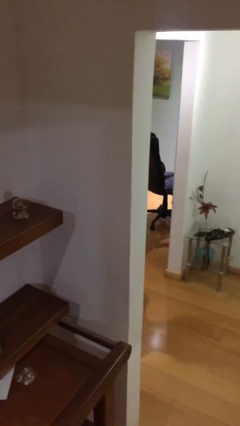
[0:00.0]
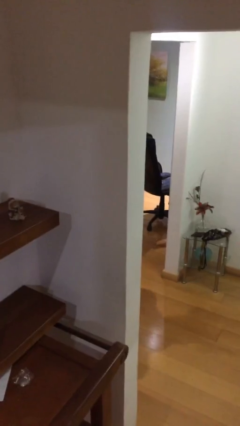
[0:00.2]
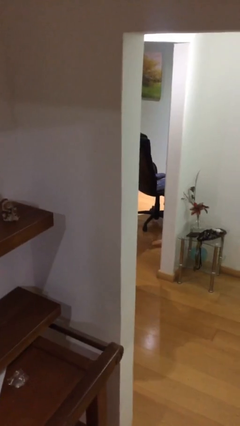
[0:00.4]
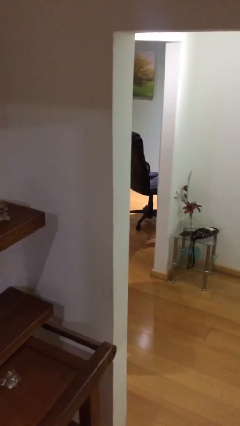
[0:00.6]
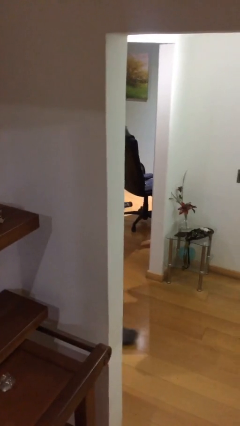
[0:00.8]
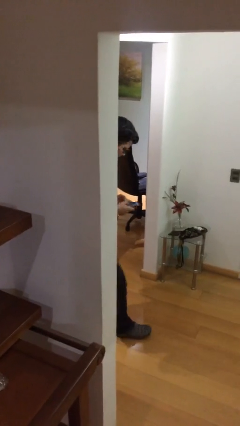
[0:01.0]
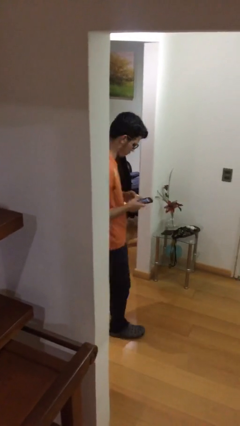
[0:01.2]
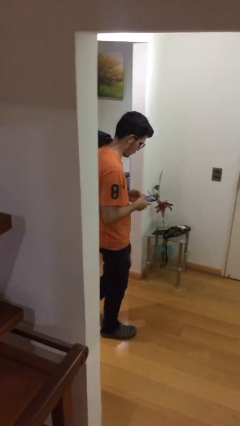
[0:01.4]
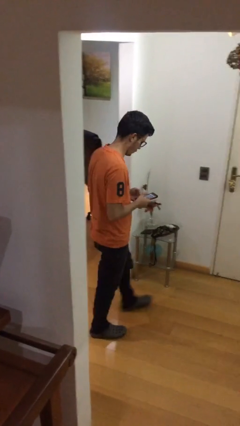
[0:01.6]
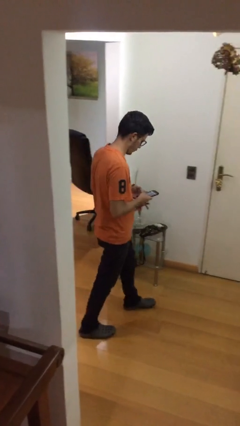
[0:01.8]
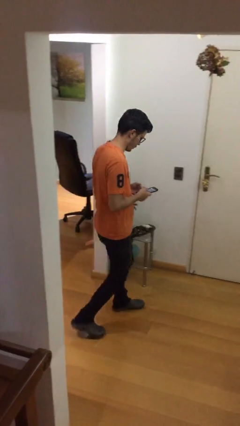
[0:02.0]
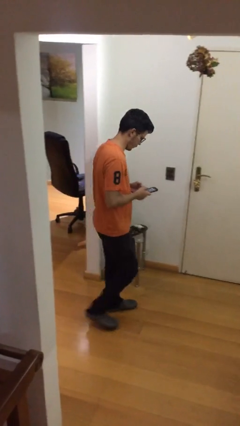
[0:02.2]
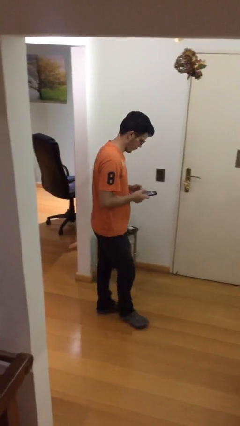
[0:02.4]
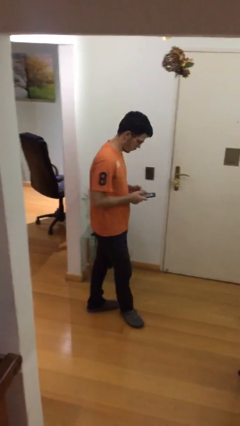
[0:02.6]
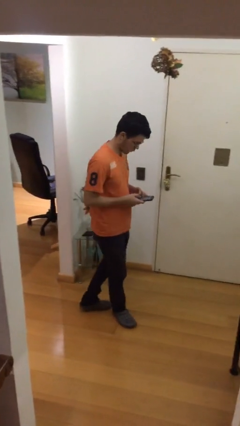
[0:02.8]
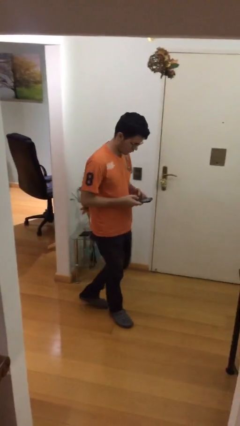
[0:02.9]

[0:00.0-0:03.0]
person enters scene through structure

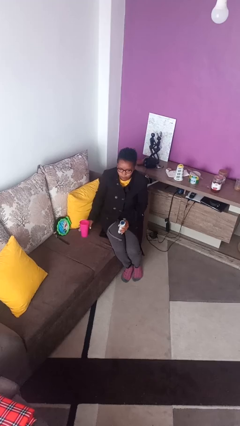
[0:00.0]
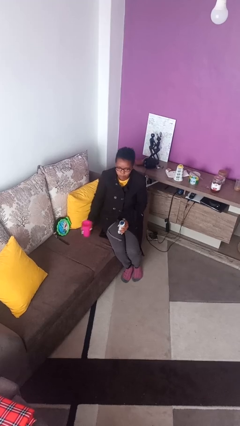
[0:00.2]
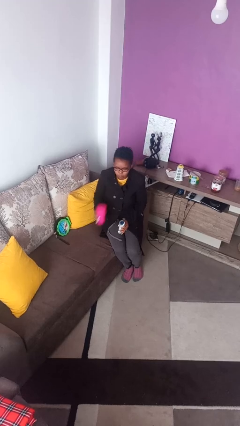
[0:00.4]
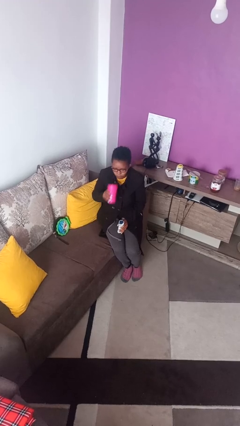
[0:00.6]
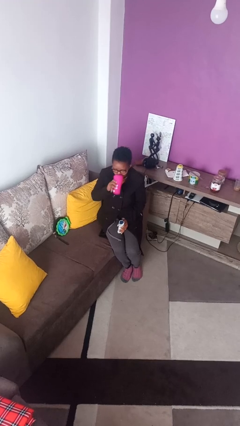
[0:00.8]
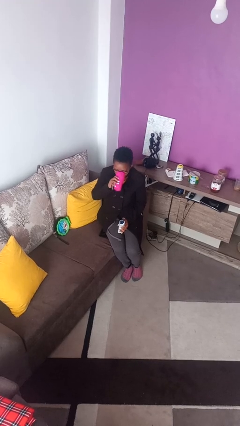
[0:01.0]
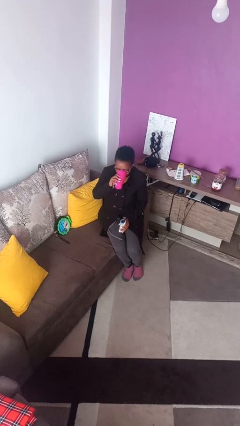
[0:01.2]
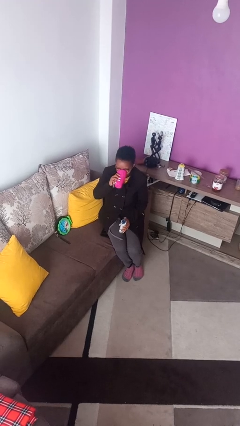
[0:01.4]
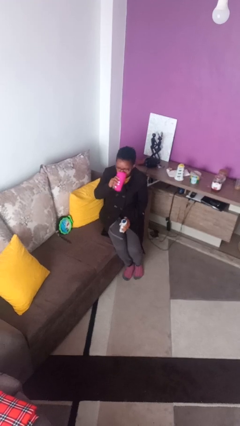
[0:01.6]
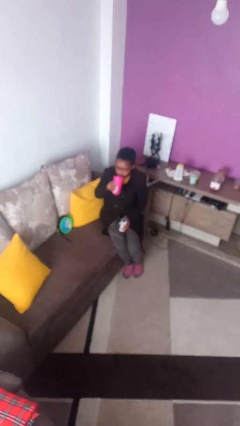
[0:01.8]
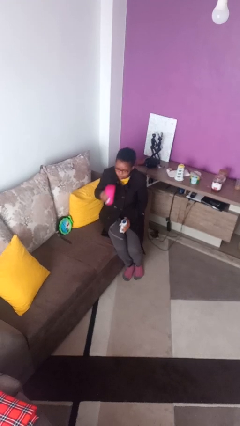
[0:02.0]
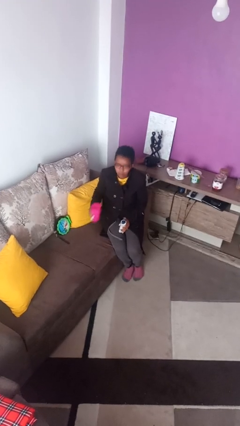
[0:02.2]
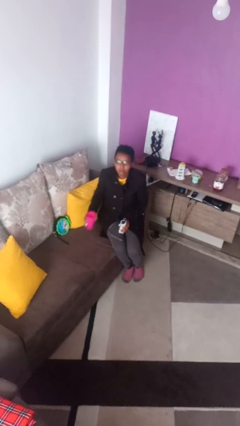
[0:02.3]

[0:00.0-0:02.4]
person drinks from cup

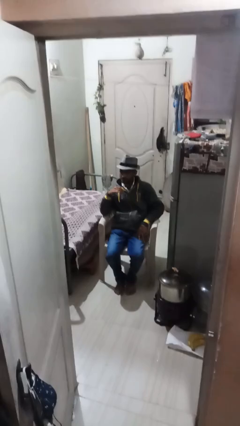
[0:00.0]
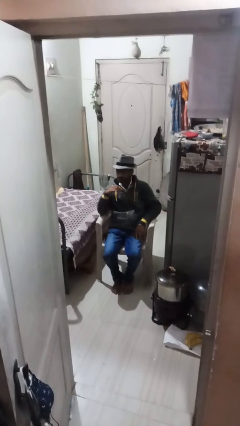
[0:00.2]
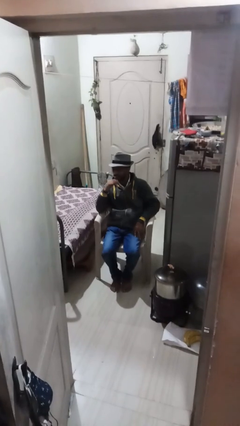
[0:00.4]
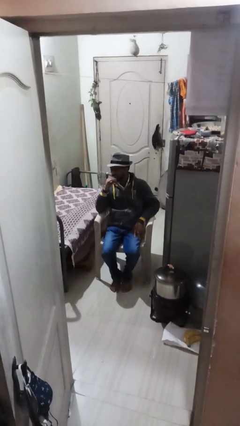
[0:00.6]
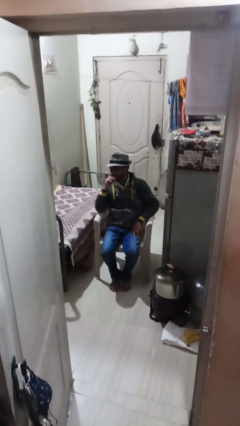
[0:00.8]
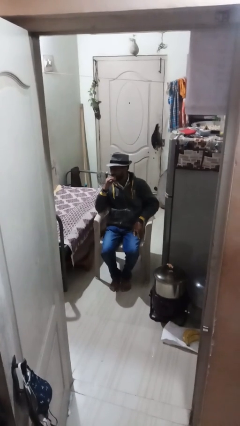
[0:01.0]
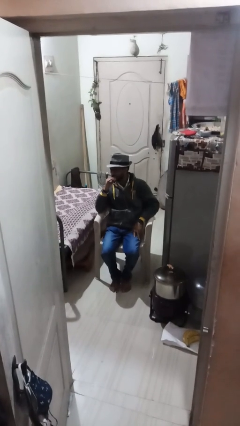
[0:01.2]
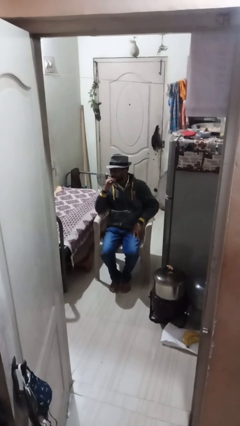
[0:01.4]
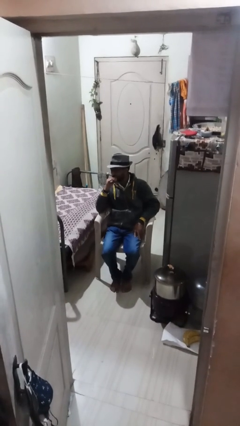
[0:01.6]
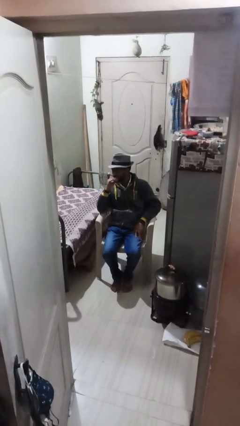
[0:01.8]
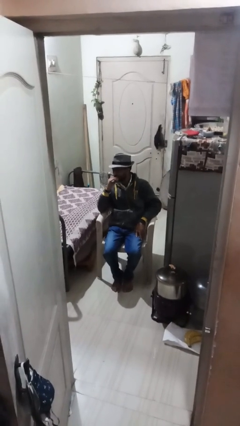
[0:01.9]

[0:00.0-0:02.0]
person flosses

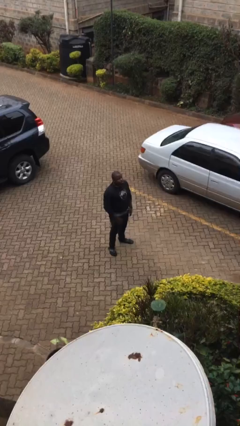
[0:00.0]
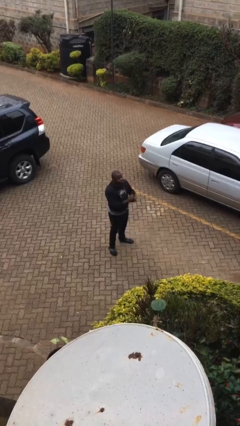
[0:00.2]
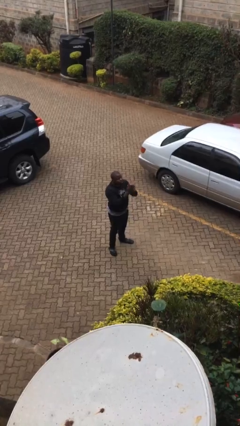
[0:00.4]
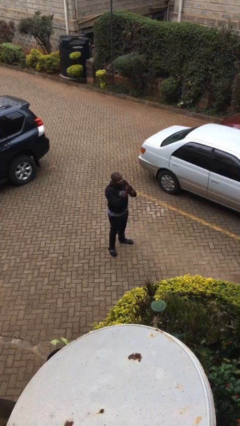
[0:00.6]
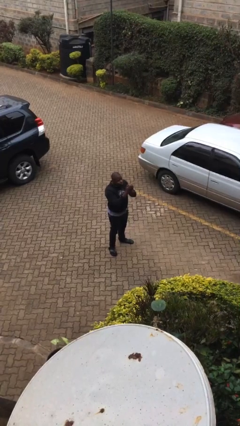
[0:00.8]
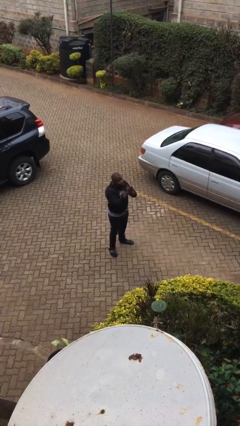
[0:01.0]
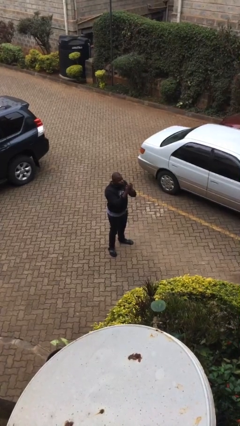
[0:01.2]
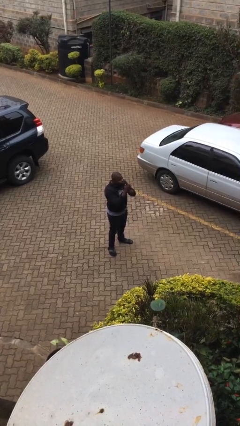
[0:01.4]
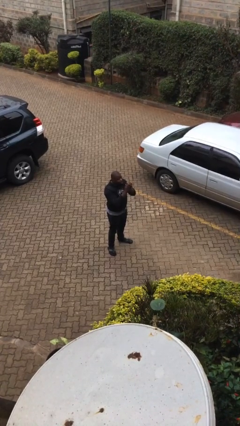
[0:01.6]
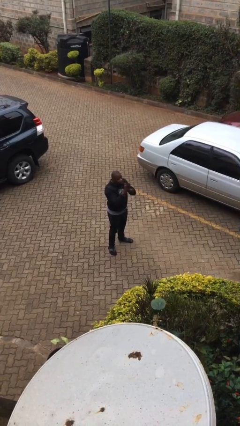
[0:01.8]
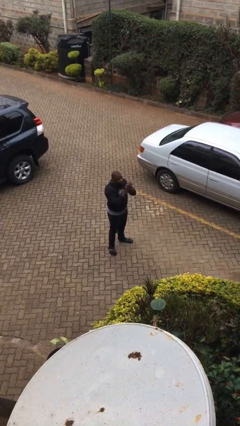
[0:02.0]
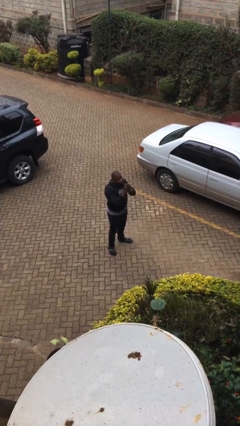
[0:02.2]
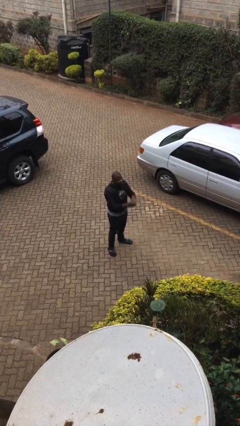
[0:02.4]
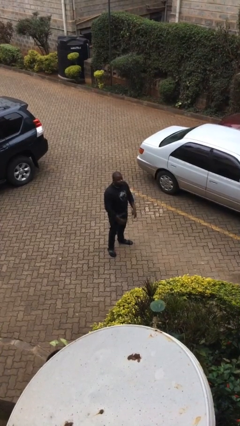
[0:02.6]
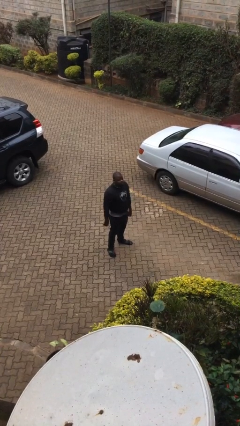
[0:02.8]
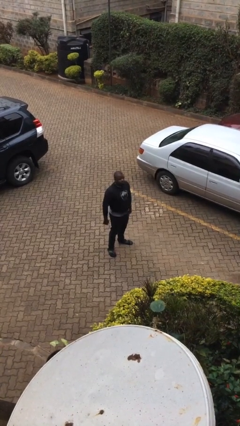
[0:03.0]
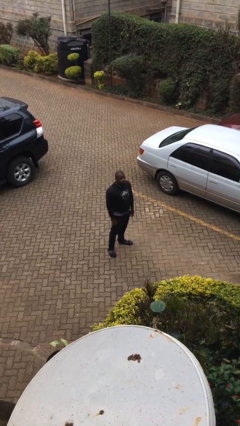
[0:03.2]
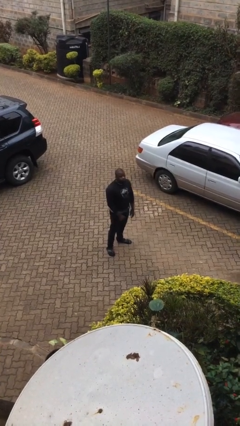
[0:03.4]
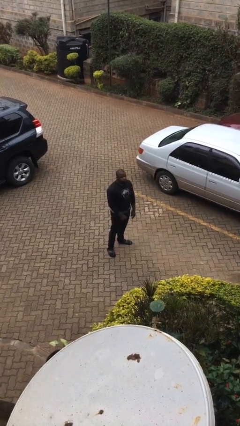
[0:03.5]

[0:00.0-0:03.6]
person blows into hands

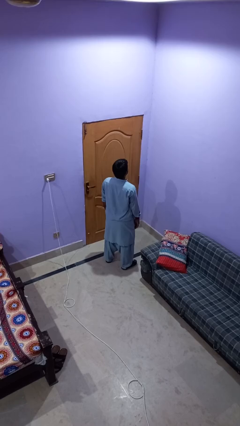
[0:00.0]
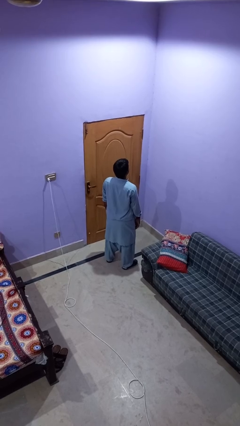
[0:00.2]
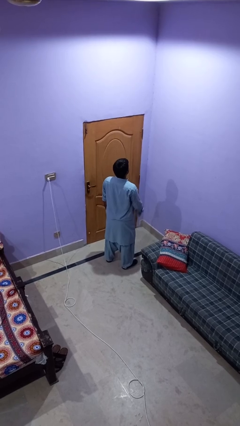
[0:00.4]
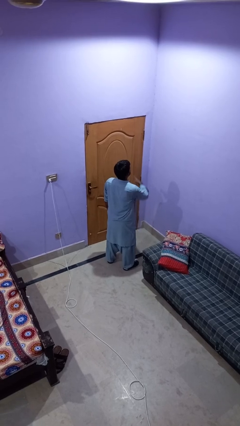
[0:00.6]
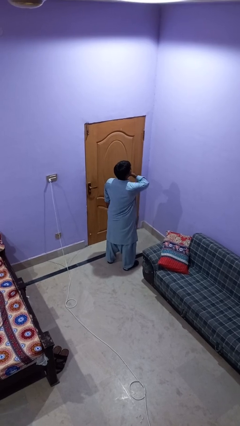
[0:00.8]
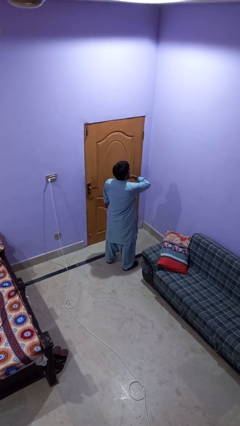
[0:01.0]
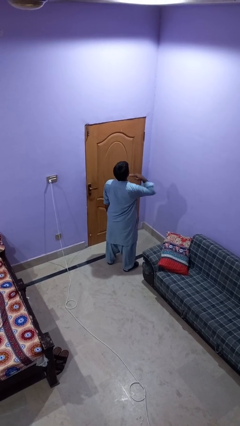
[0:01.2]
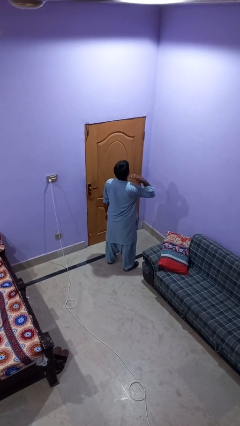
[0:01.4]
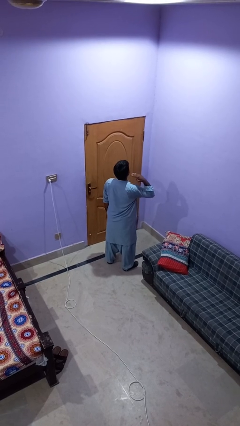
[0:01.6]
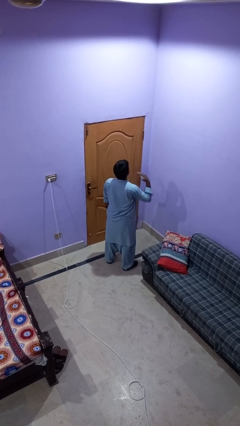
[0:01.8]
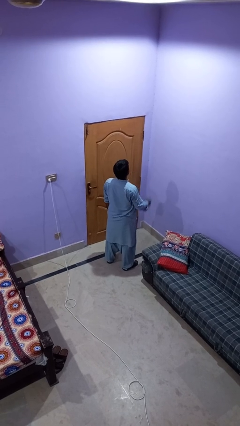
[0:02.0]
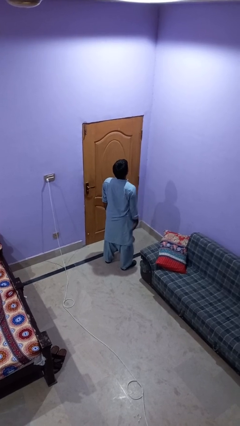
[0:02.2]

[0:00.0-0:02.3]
person gestures cut

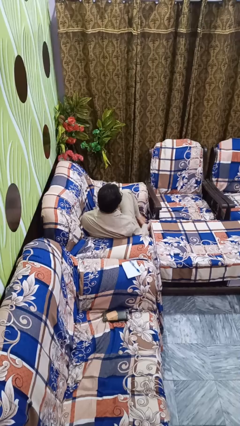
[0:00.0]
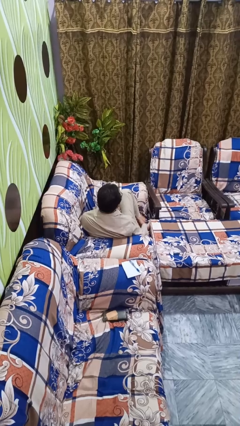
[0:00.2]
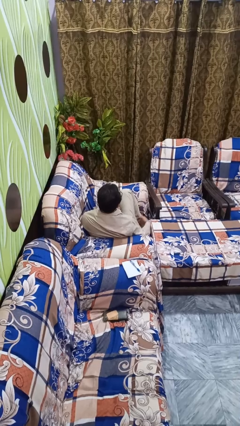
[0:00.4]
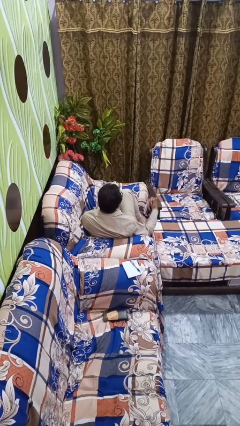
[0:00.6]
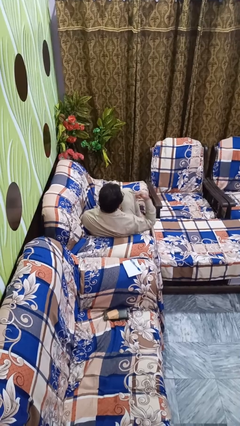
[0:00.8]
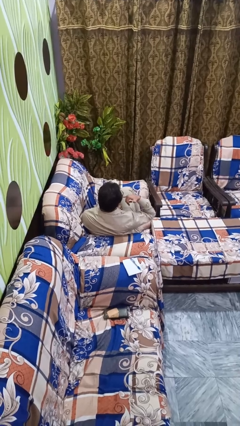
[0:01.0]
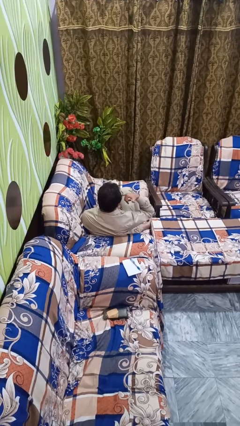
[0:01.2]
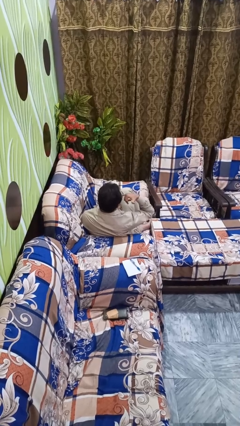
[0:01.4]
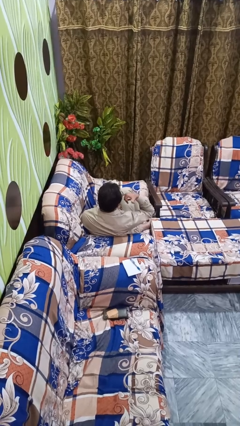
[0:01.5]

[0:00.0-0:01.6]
person gestures call me

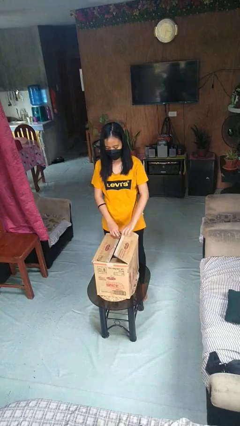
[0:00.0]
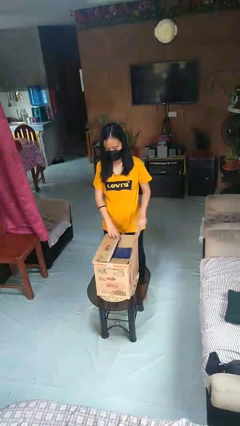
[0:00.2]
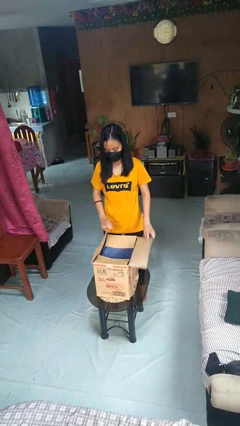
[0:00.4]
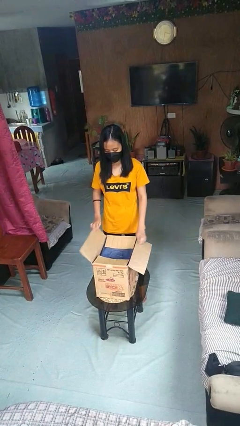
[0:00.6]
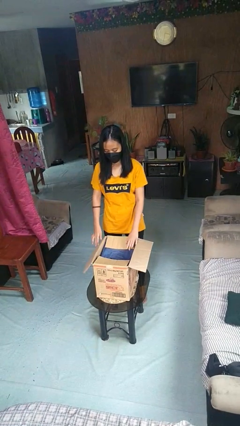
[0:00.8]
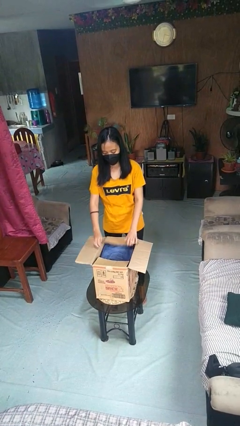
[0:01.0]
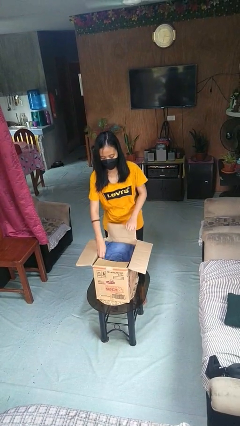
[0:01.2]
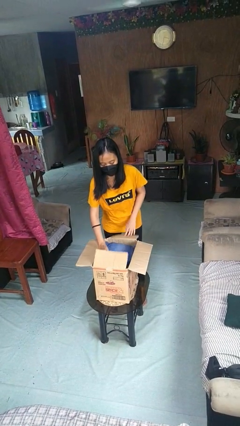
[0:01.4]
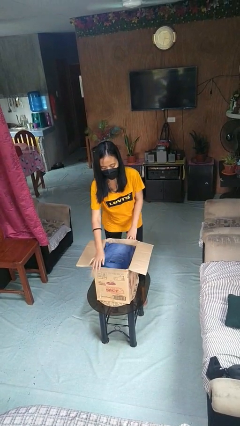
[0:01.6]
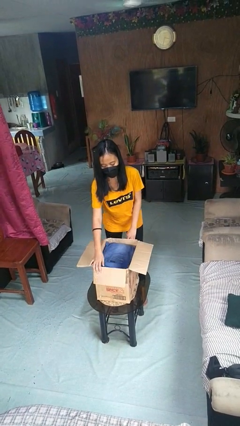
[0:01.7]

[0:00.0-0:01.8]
person opens box

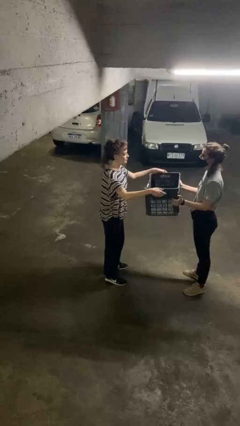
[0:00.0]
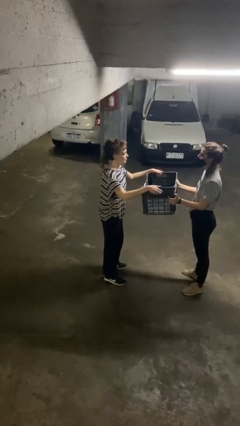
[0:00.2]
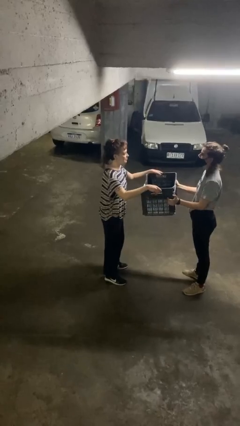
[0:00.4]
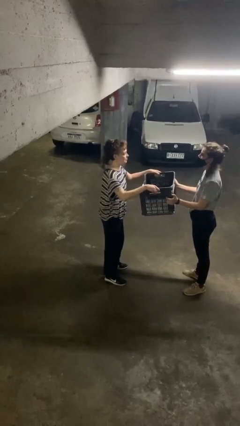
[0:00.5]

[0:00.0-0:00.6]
person transfers object to person
